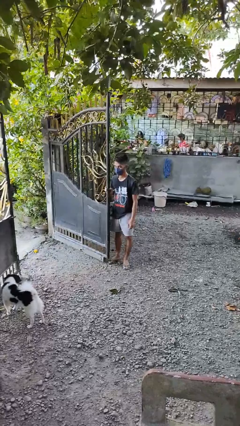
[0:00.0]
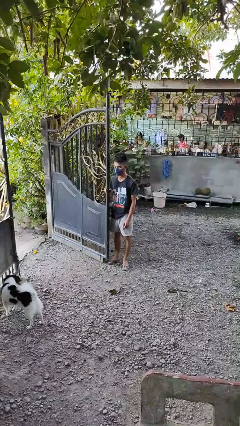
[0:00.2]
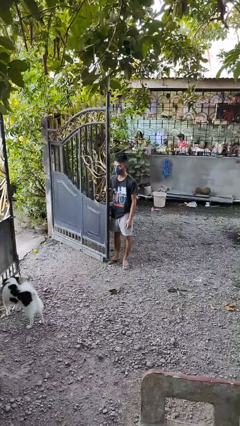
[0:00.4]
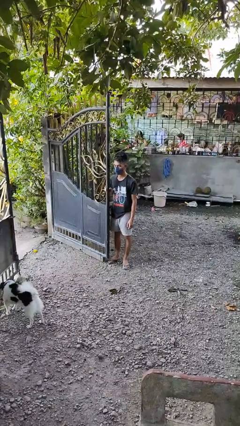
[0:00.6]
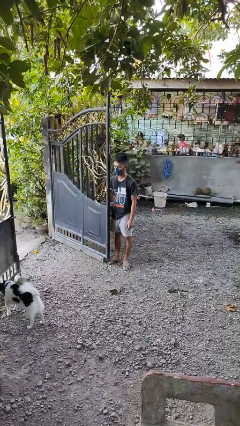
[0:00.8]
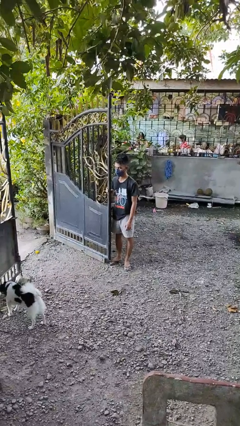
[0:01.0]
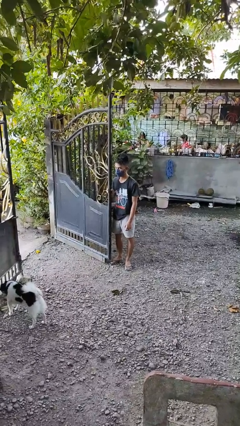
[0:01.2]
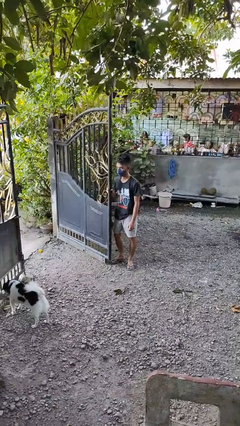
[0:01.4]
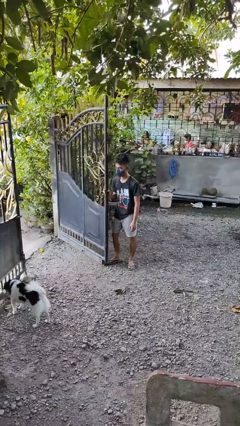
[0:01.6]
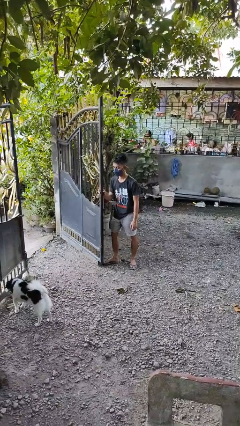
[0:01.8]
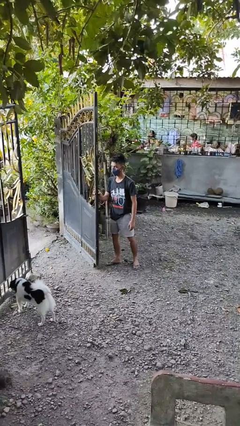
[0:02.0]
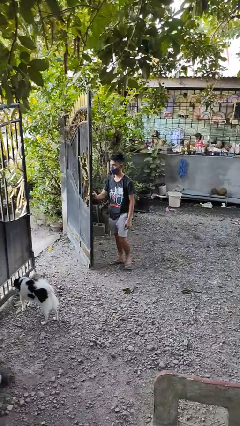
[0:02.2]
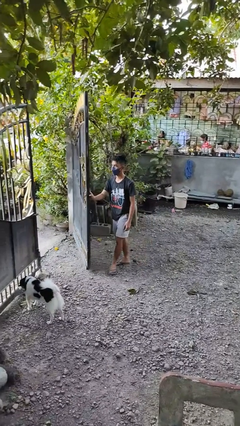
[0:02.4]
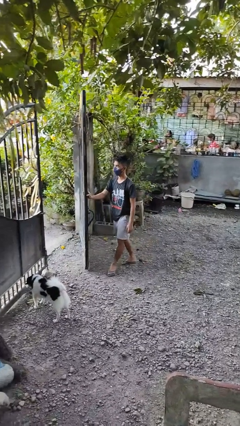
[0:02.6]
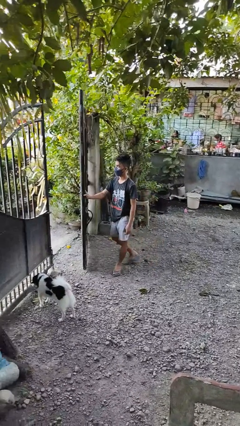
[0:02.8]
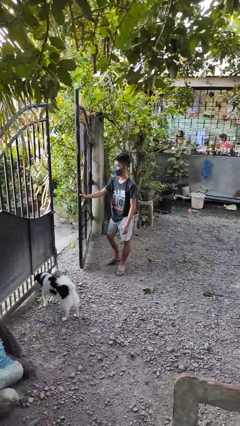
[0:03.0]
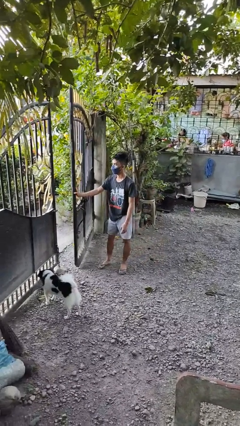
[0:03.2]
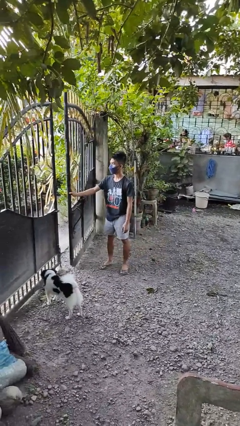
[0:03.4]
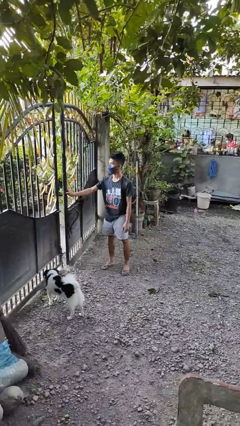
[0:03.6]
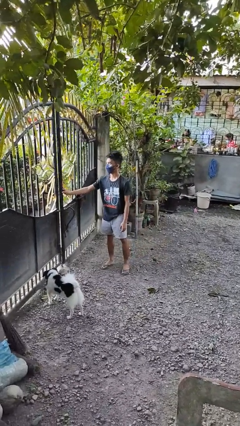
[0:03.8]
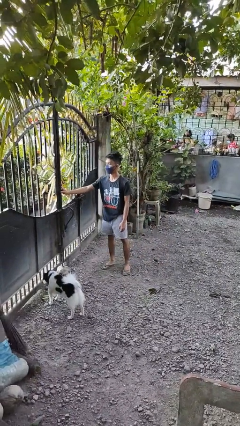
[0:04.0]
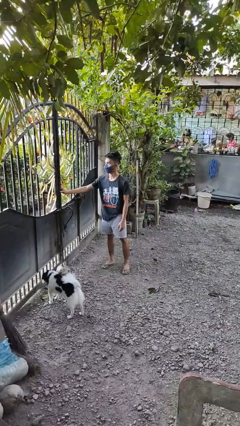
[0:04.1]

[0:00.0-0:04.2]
person closes gate

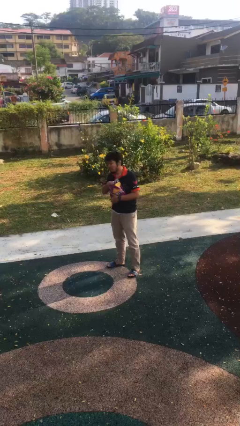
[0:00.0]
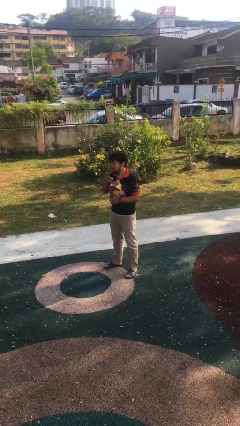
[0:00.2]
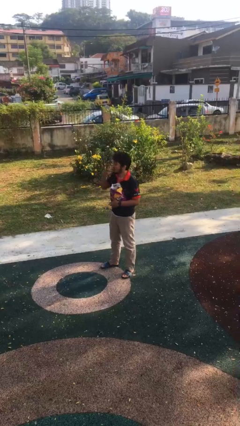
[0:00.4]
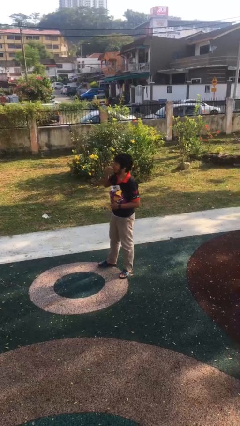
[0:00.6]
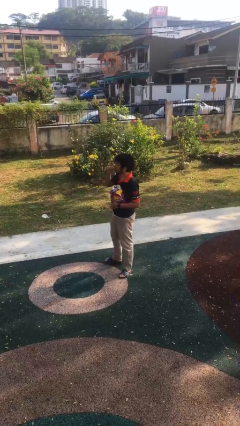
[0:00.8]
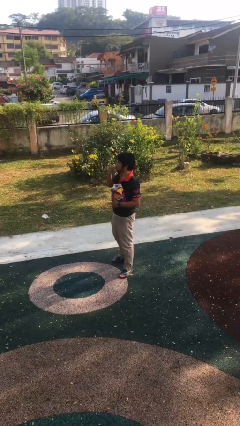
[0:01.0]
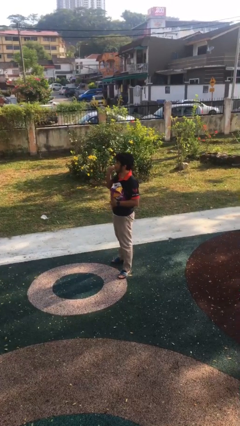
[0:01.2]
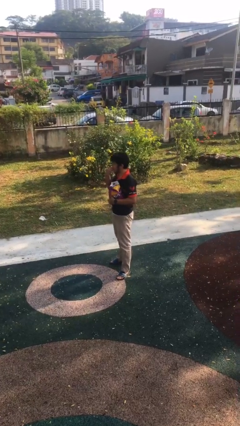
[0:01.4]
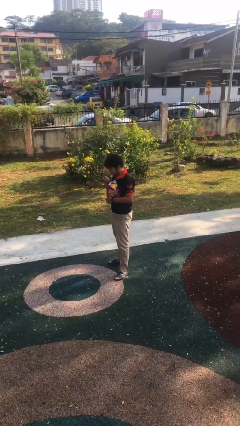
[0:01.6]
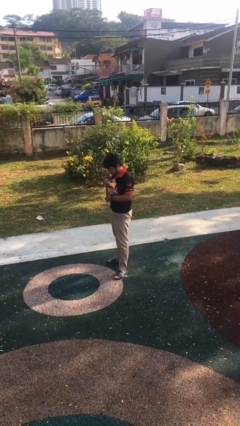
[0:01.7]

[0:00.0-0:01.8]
person eats snack from bag

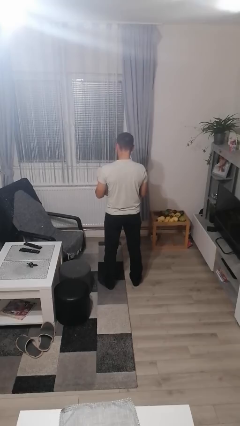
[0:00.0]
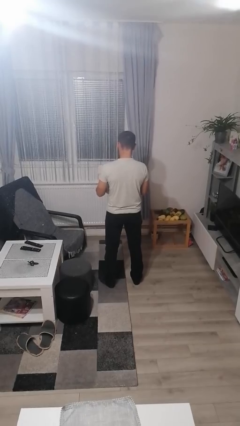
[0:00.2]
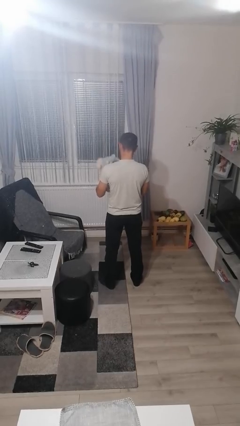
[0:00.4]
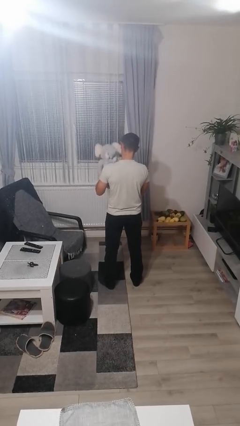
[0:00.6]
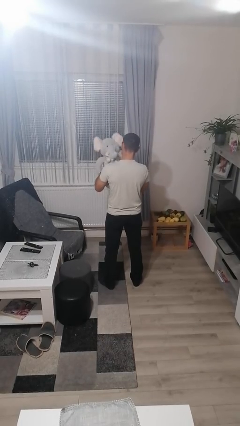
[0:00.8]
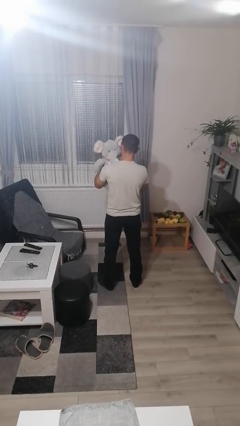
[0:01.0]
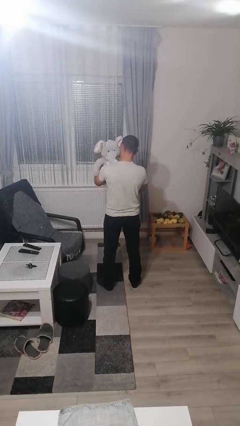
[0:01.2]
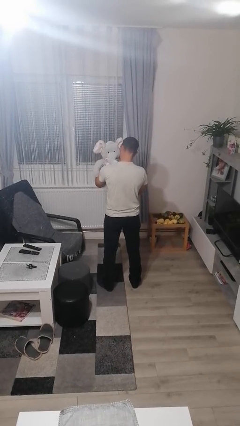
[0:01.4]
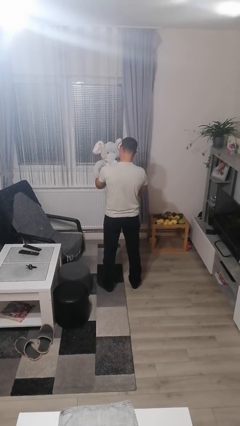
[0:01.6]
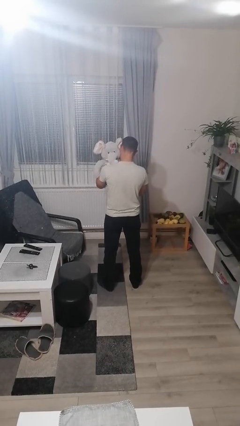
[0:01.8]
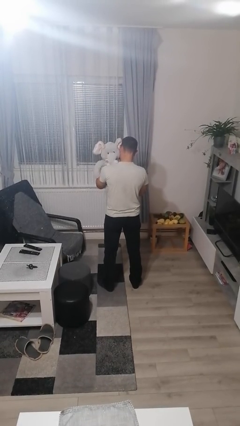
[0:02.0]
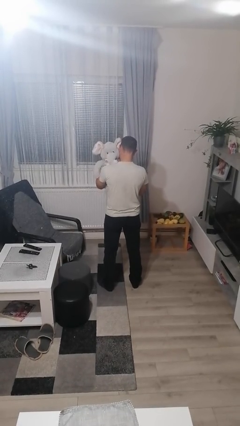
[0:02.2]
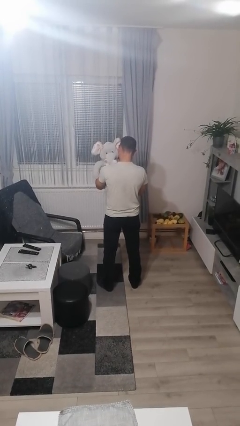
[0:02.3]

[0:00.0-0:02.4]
person hugs stuffed animal

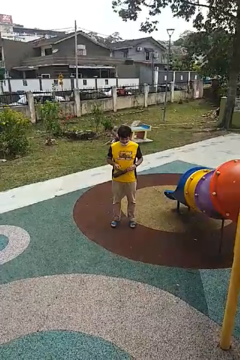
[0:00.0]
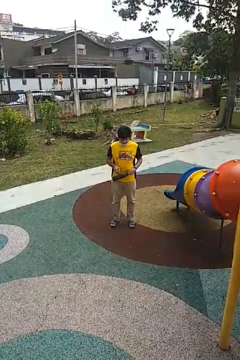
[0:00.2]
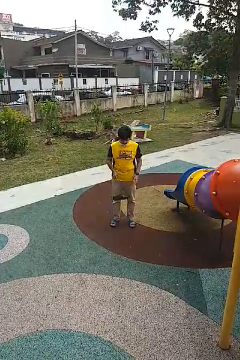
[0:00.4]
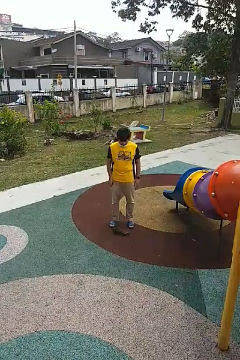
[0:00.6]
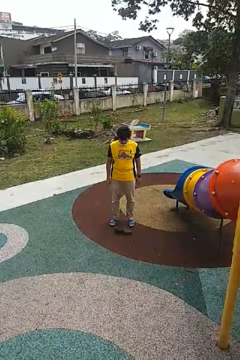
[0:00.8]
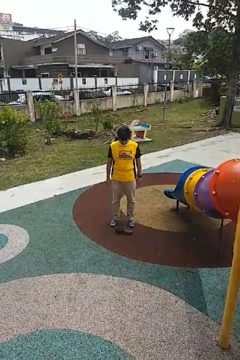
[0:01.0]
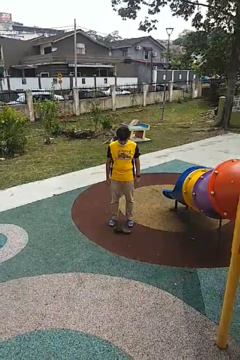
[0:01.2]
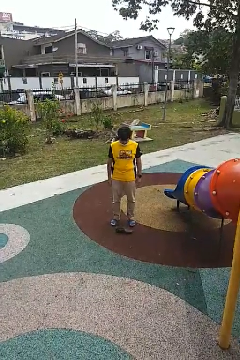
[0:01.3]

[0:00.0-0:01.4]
person drops object

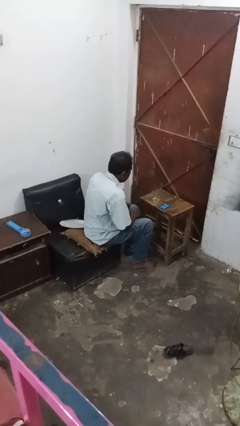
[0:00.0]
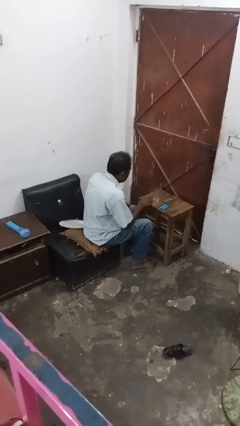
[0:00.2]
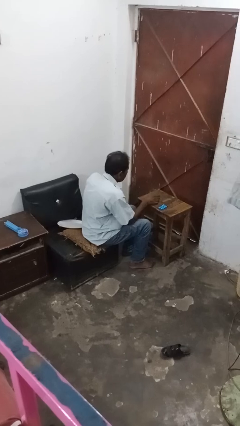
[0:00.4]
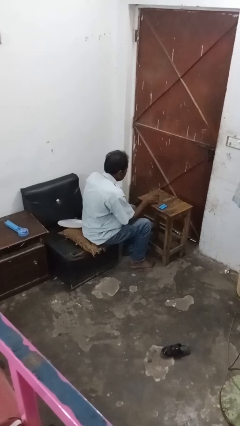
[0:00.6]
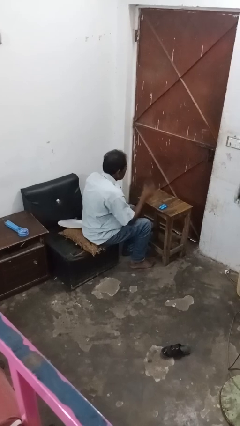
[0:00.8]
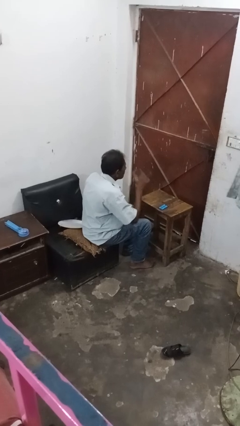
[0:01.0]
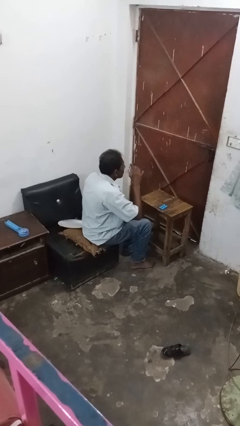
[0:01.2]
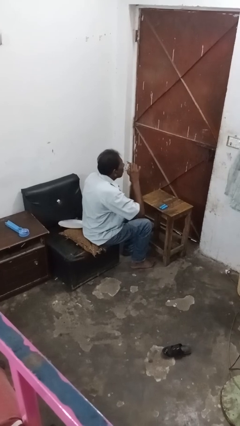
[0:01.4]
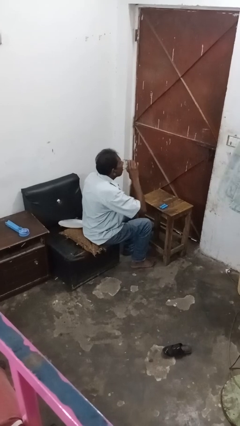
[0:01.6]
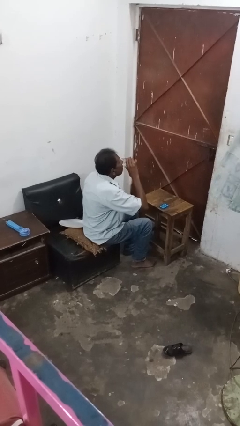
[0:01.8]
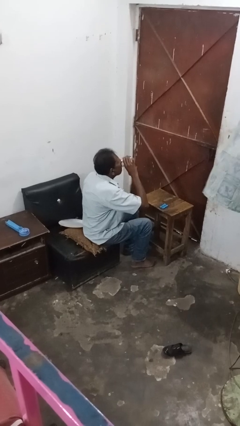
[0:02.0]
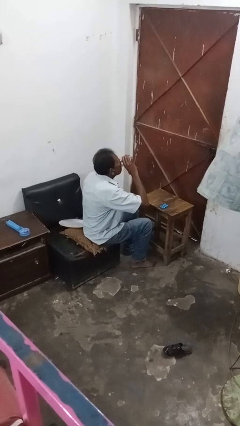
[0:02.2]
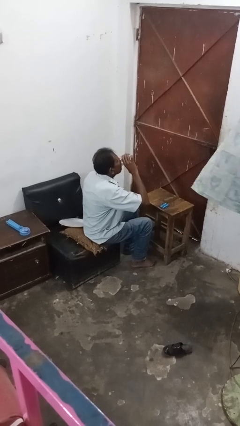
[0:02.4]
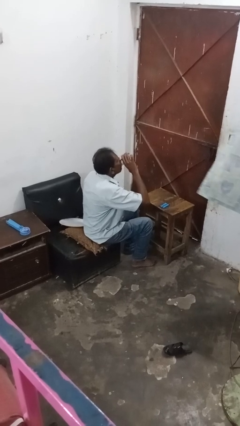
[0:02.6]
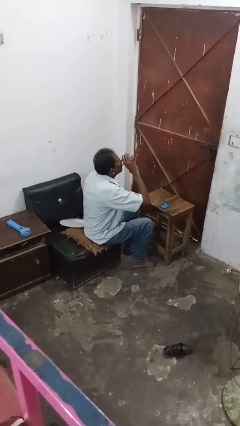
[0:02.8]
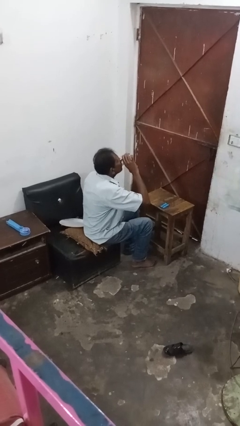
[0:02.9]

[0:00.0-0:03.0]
person drinks from cup

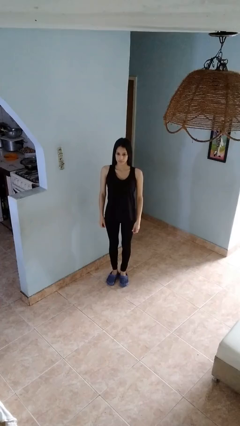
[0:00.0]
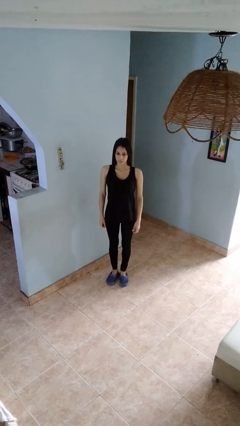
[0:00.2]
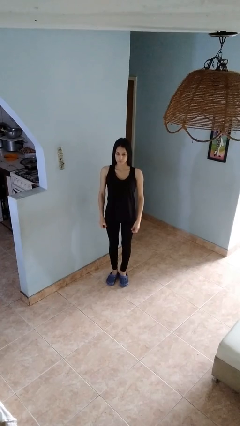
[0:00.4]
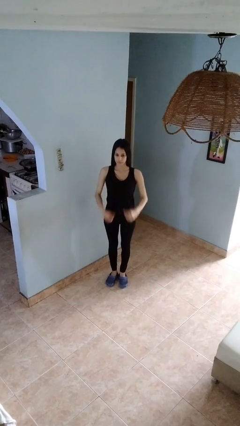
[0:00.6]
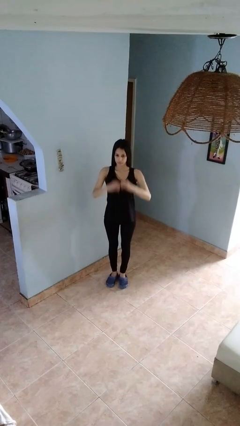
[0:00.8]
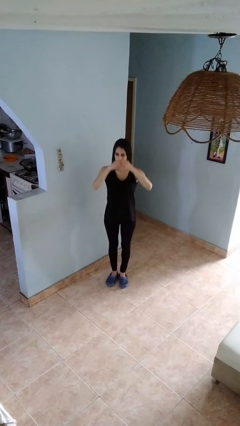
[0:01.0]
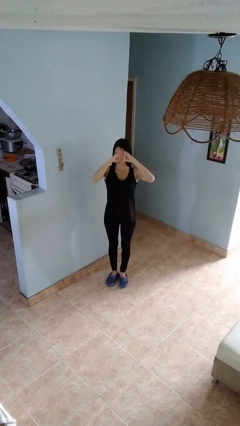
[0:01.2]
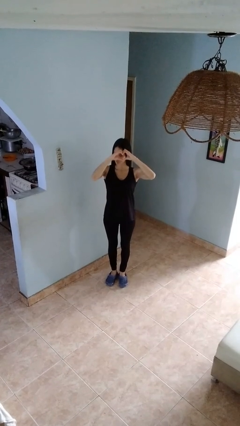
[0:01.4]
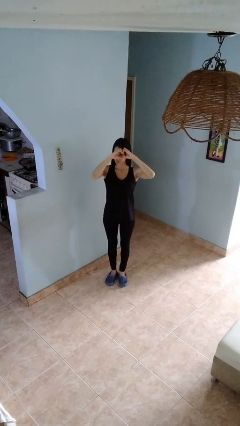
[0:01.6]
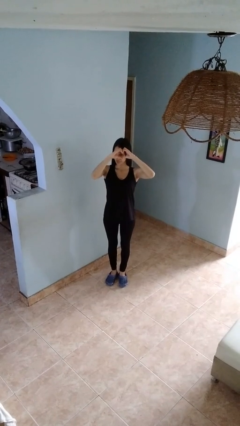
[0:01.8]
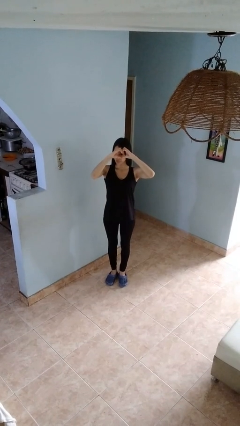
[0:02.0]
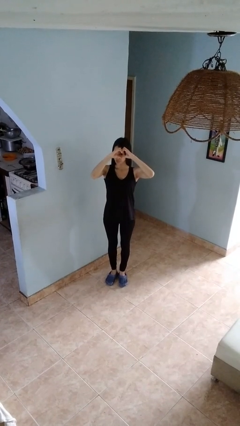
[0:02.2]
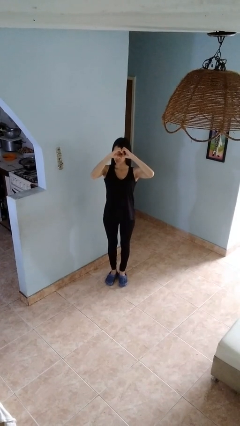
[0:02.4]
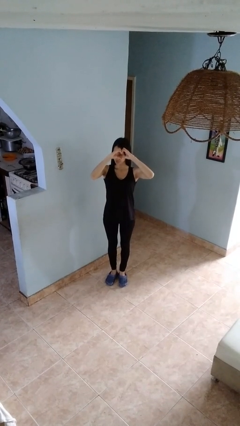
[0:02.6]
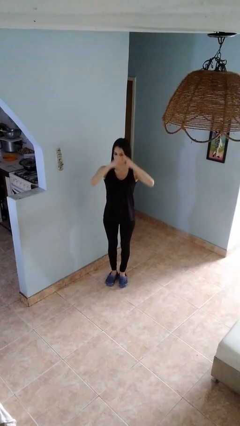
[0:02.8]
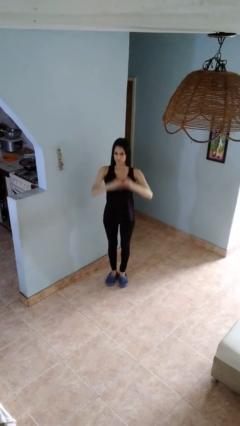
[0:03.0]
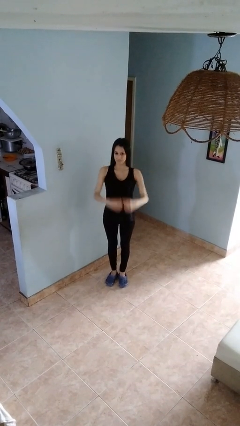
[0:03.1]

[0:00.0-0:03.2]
person gestures heart

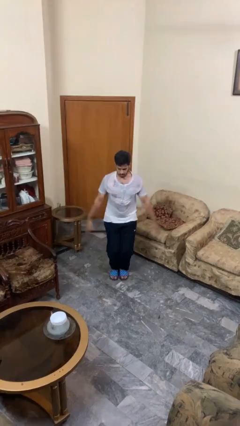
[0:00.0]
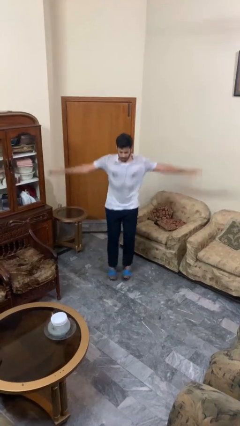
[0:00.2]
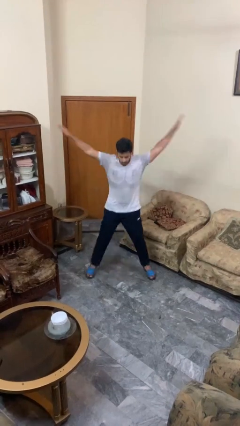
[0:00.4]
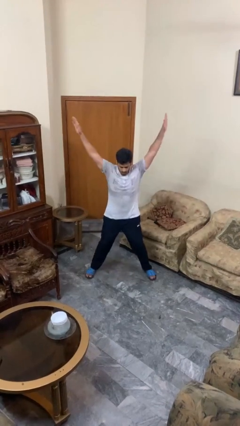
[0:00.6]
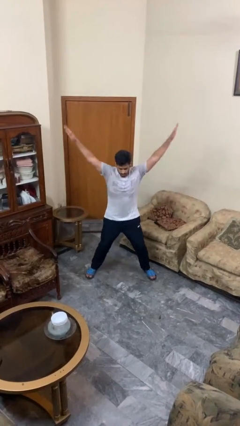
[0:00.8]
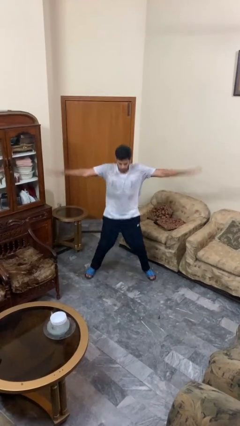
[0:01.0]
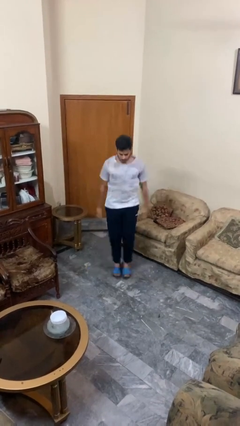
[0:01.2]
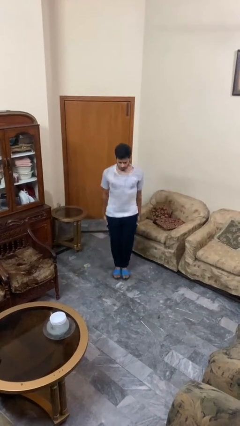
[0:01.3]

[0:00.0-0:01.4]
person exercises with jumping jacks
